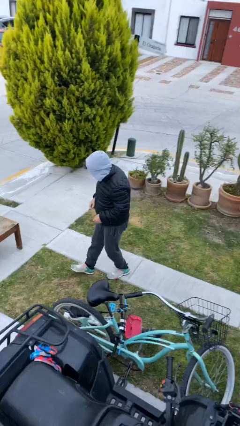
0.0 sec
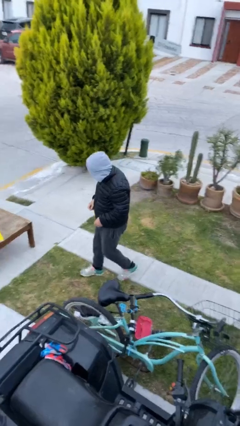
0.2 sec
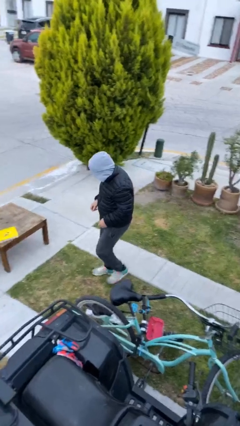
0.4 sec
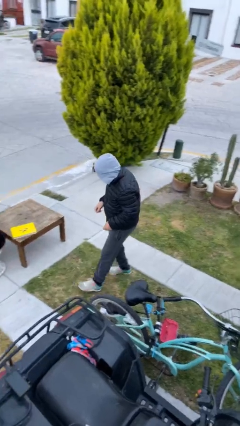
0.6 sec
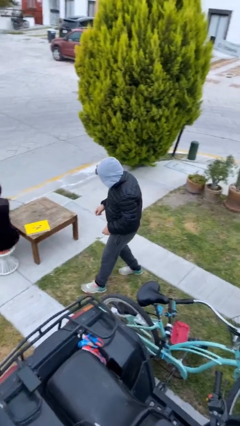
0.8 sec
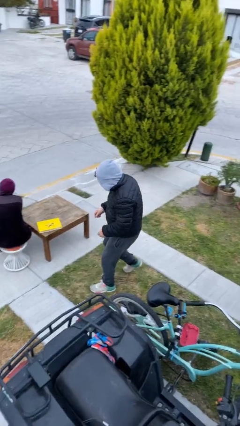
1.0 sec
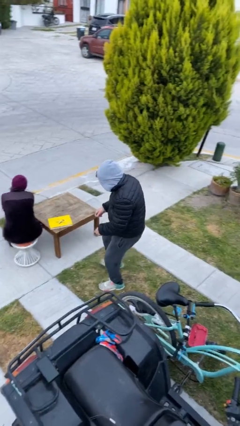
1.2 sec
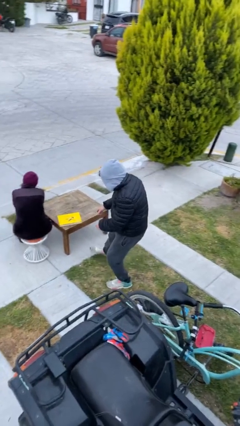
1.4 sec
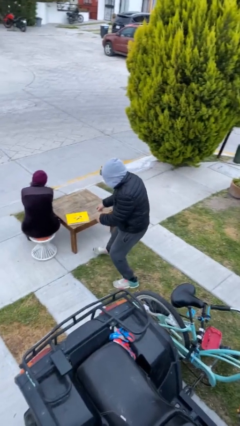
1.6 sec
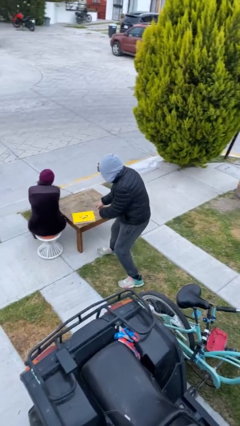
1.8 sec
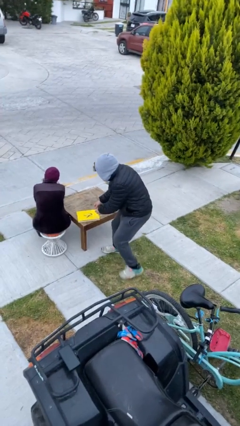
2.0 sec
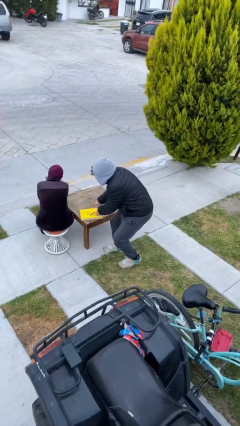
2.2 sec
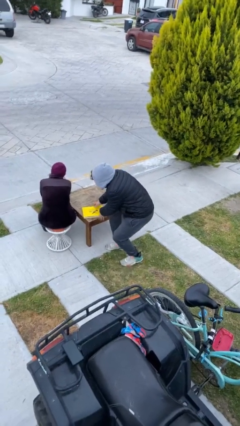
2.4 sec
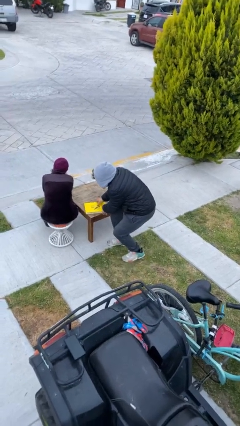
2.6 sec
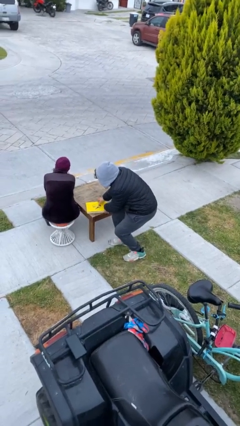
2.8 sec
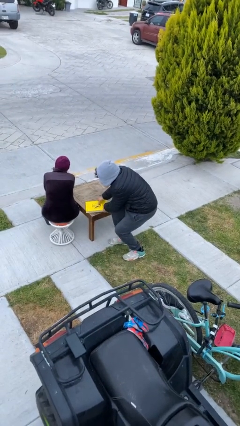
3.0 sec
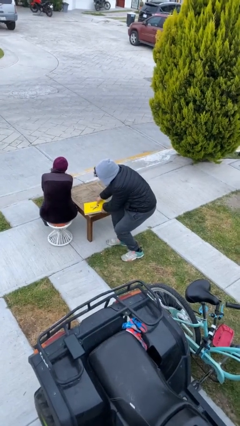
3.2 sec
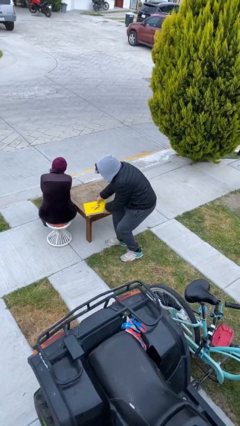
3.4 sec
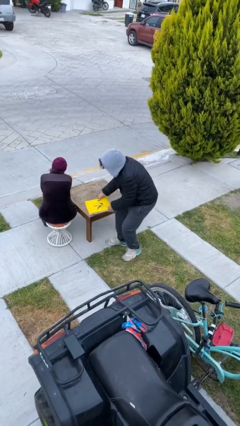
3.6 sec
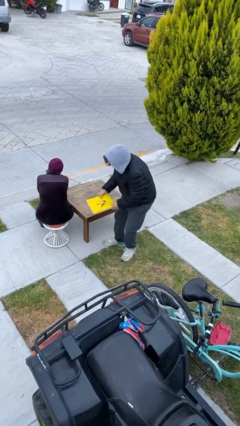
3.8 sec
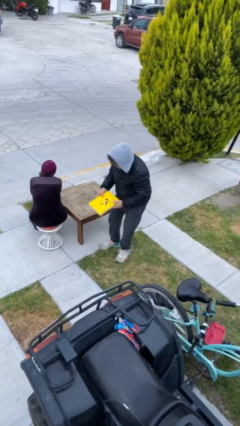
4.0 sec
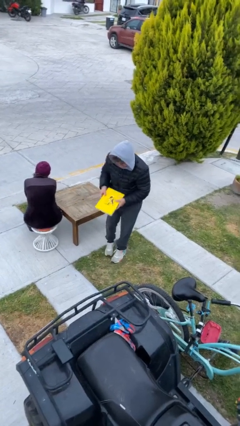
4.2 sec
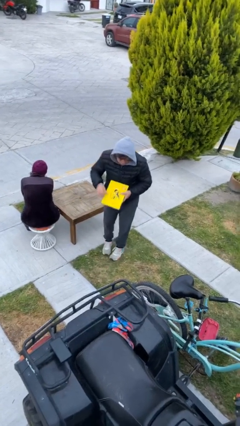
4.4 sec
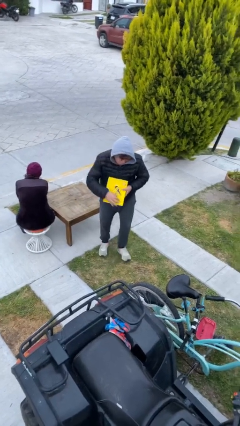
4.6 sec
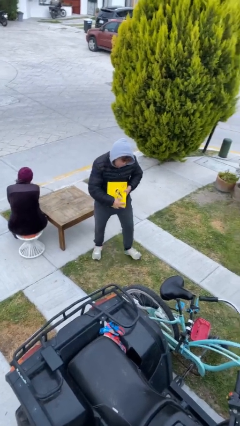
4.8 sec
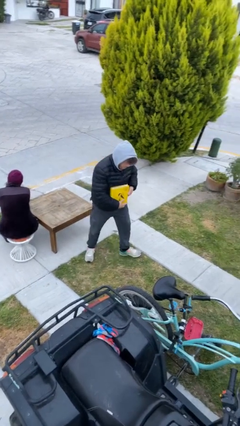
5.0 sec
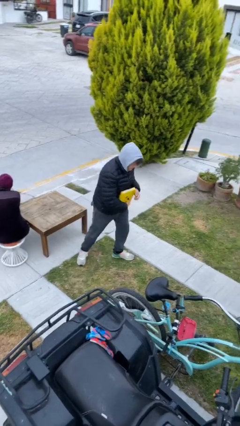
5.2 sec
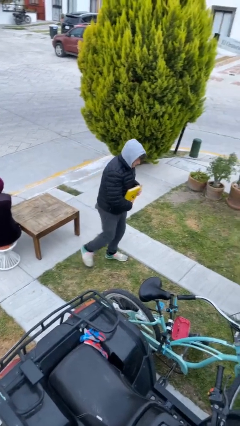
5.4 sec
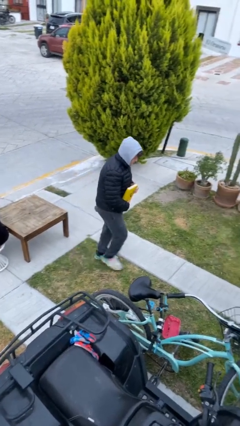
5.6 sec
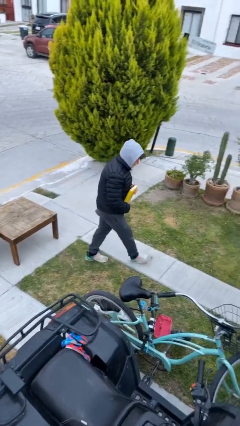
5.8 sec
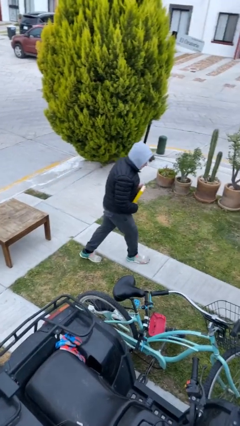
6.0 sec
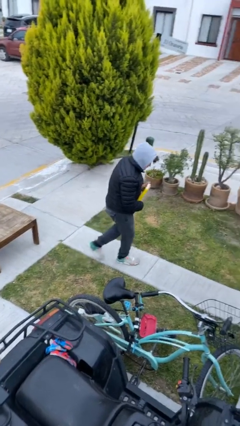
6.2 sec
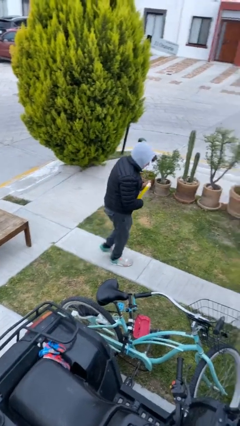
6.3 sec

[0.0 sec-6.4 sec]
person steals object from person

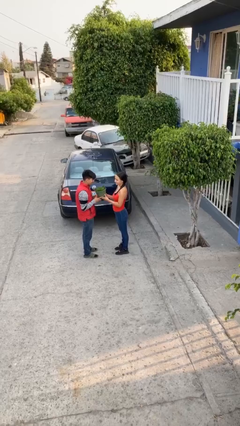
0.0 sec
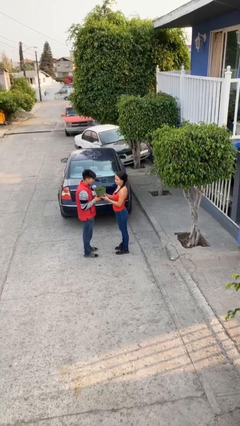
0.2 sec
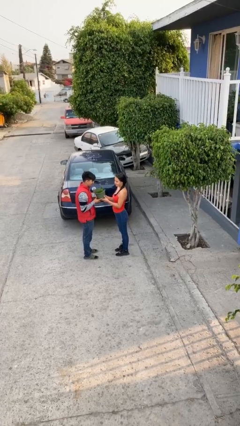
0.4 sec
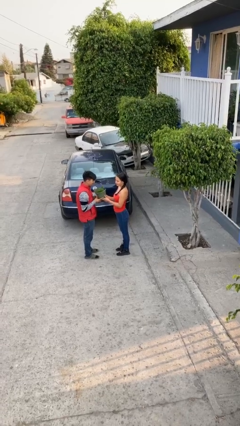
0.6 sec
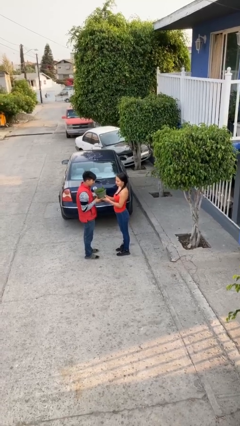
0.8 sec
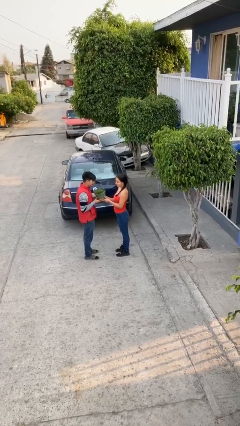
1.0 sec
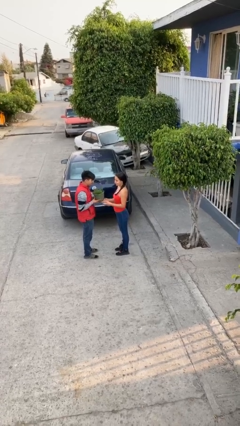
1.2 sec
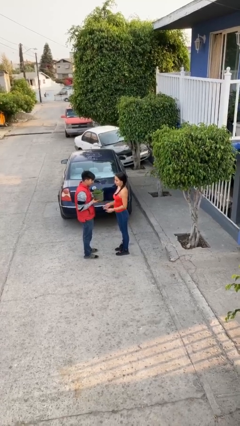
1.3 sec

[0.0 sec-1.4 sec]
person transfers object to person

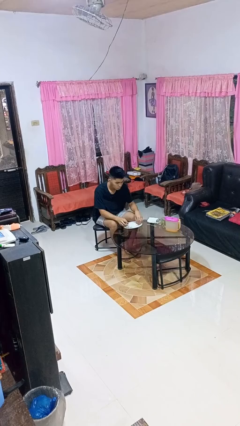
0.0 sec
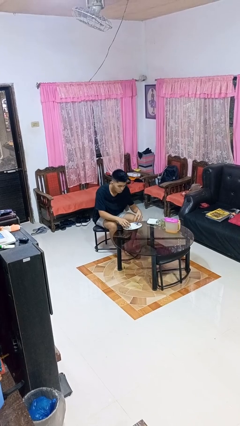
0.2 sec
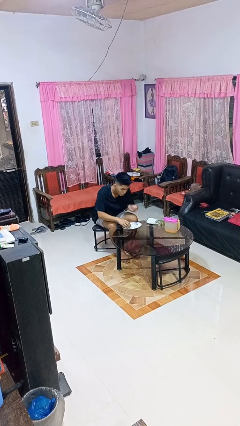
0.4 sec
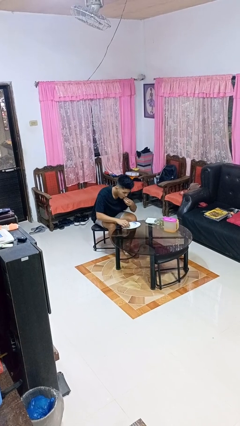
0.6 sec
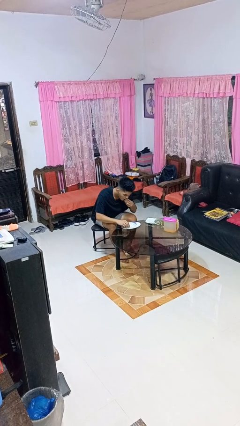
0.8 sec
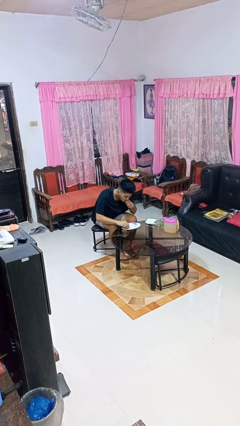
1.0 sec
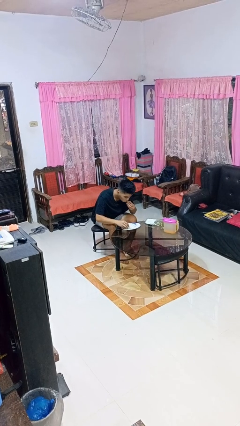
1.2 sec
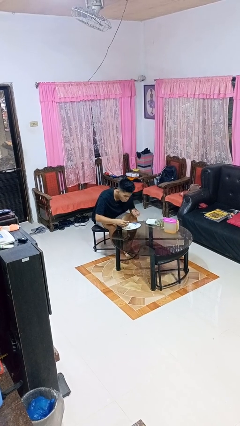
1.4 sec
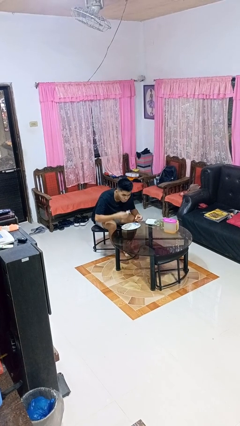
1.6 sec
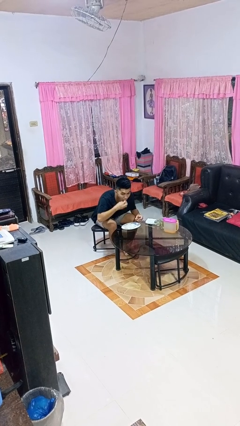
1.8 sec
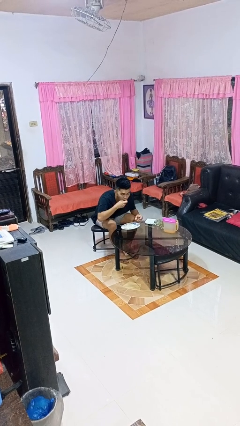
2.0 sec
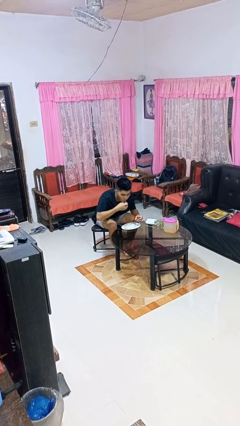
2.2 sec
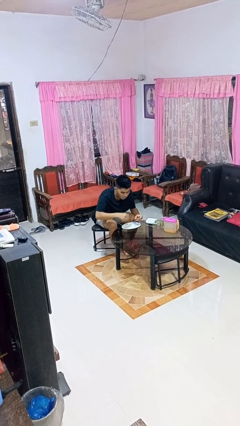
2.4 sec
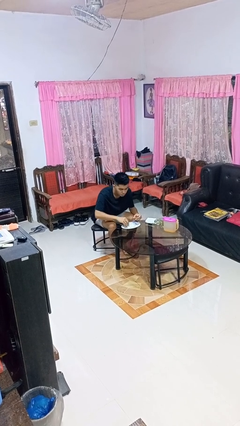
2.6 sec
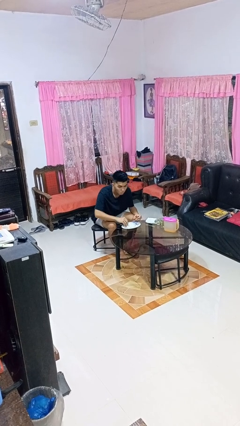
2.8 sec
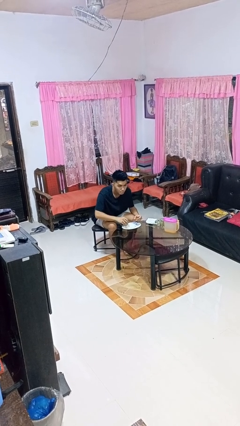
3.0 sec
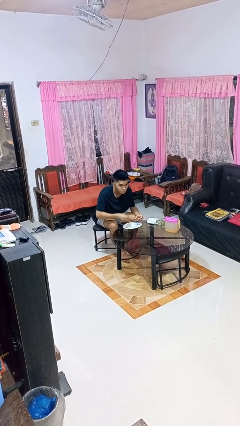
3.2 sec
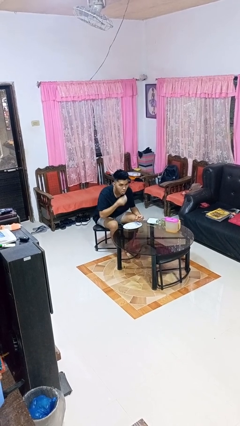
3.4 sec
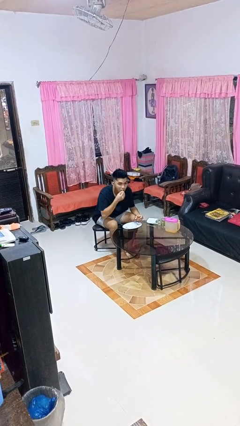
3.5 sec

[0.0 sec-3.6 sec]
person eats with hands

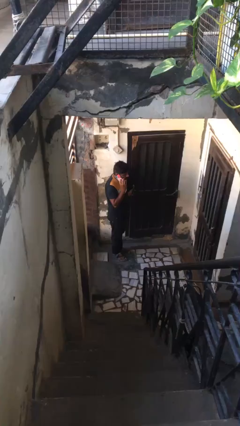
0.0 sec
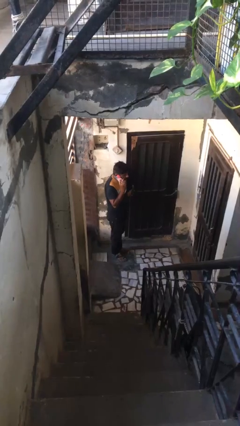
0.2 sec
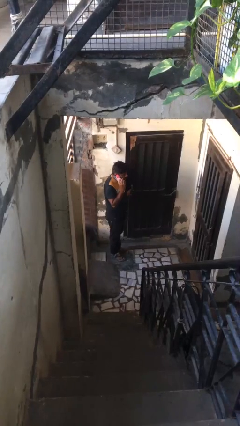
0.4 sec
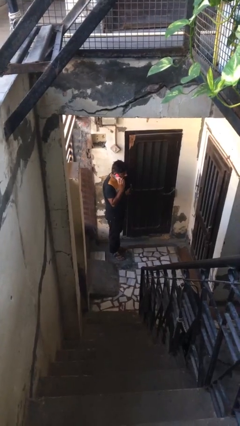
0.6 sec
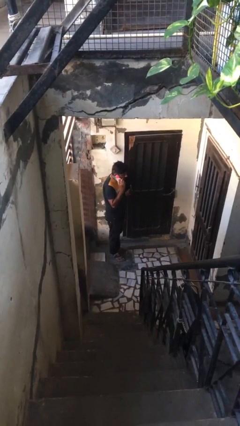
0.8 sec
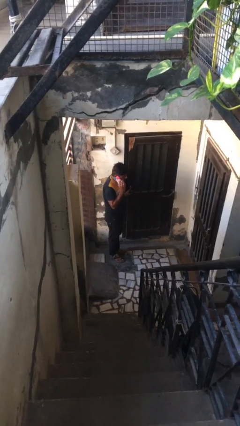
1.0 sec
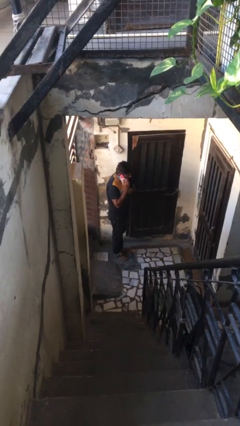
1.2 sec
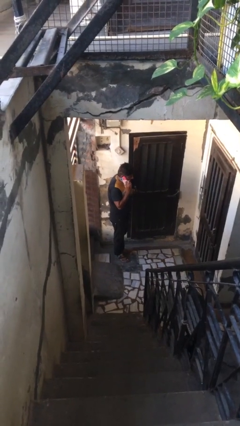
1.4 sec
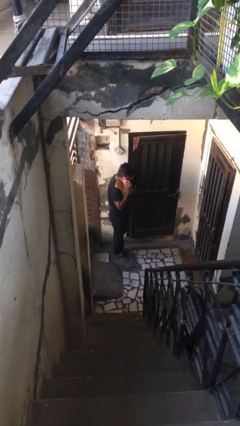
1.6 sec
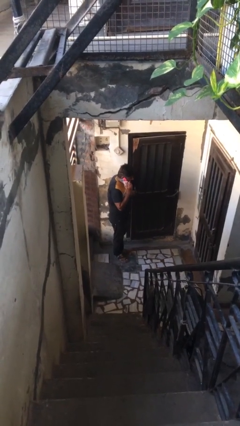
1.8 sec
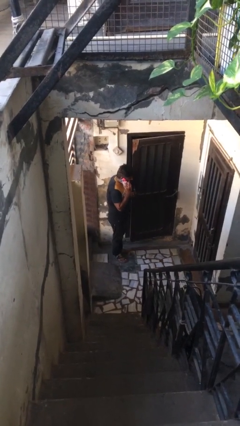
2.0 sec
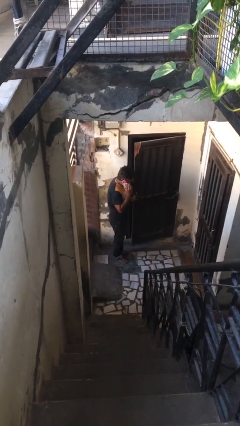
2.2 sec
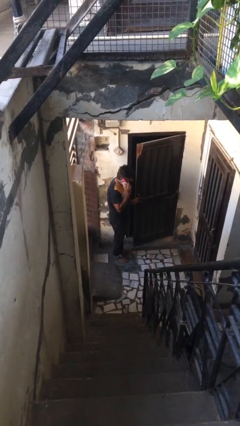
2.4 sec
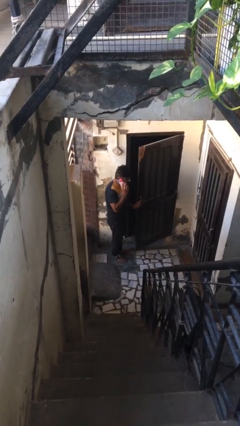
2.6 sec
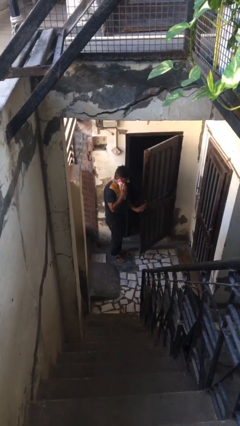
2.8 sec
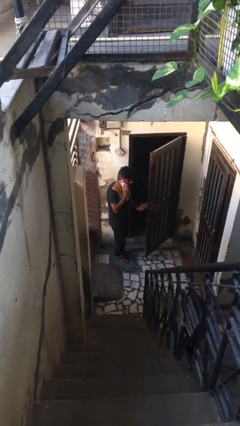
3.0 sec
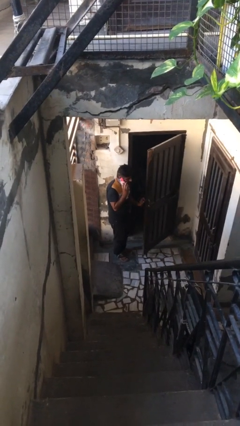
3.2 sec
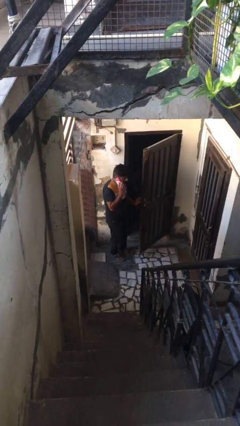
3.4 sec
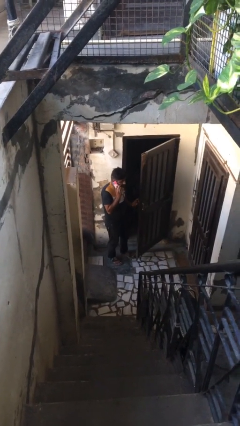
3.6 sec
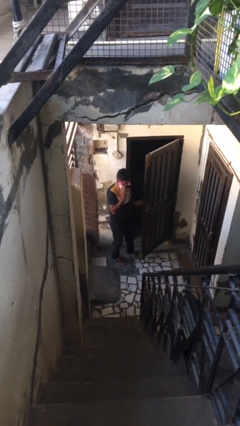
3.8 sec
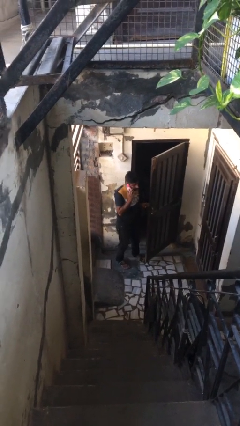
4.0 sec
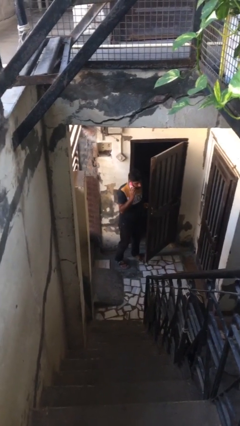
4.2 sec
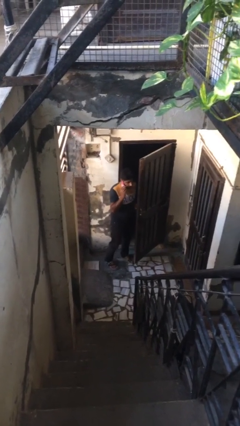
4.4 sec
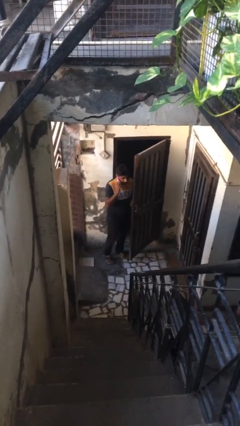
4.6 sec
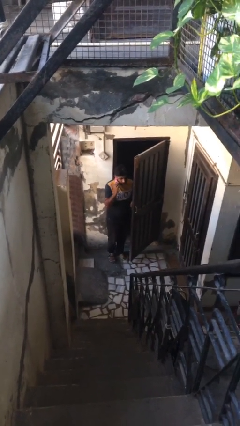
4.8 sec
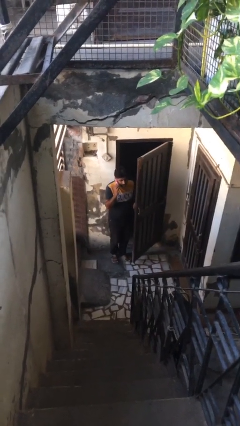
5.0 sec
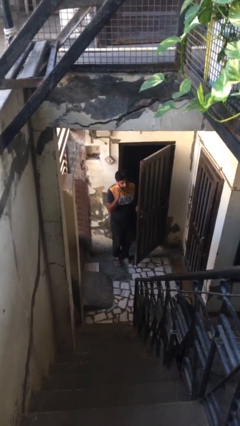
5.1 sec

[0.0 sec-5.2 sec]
person opens facility door

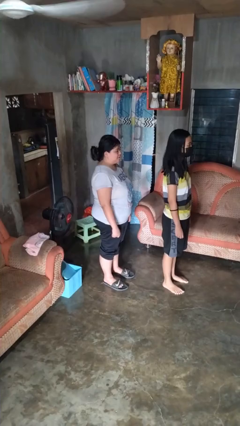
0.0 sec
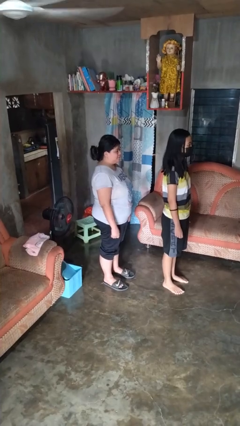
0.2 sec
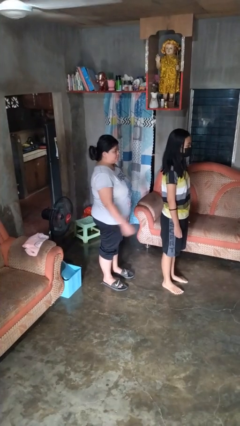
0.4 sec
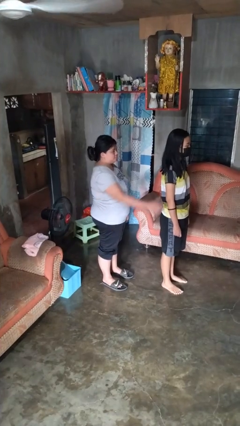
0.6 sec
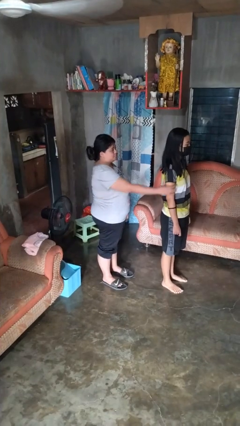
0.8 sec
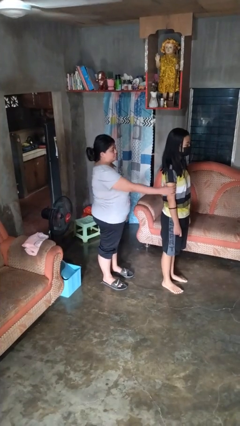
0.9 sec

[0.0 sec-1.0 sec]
person grabs person by shoulder
